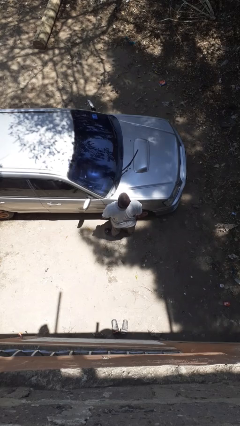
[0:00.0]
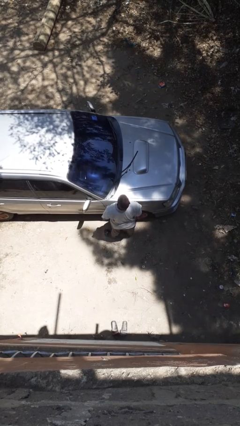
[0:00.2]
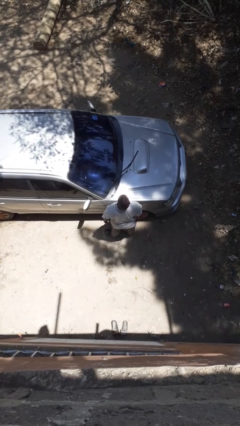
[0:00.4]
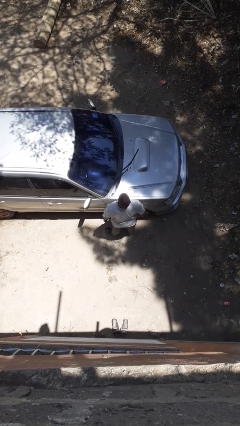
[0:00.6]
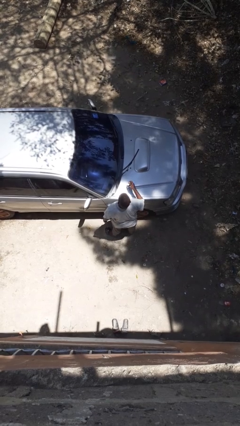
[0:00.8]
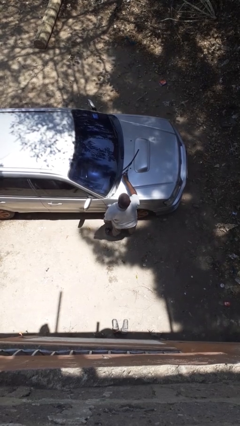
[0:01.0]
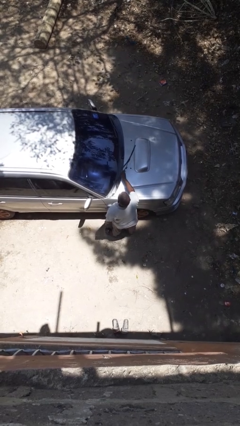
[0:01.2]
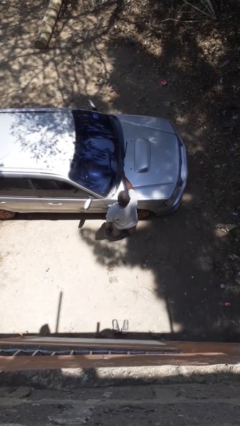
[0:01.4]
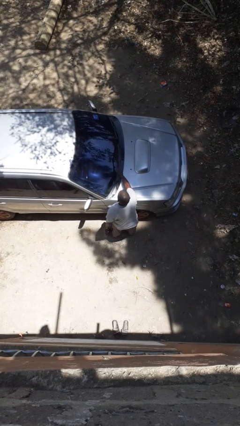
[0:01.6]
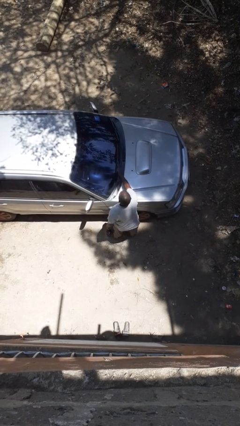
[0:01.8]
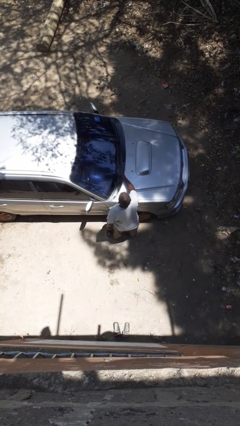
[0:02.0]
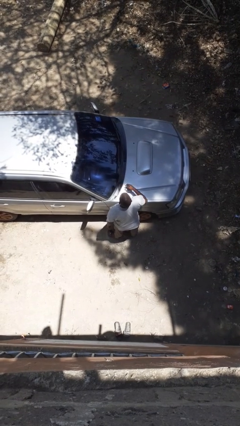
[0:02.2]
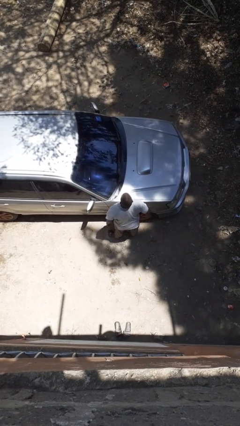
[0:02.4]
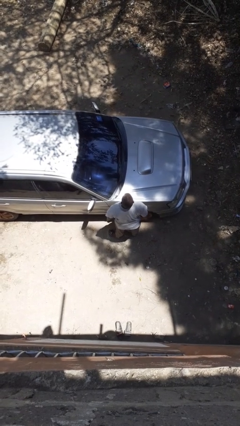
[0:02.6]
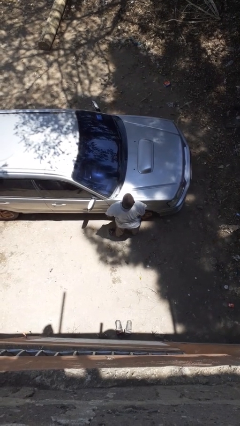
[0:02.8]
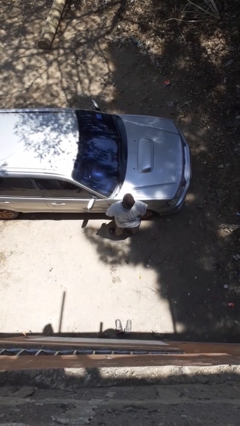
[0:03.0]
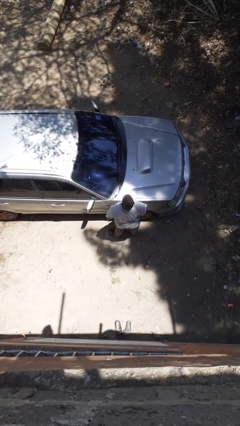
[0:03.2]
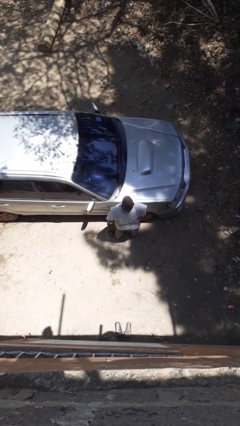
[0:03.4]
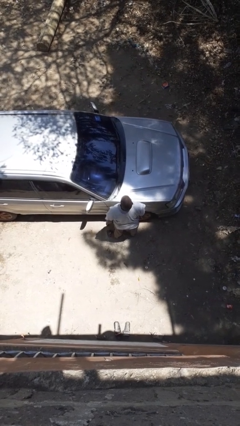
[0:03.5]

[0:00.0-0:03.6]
person flips down car wipers

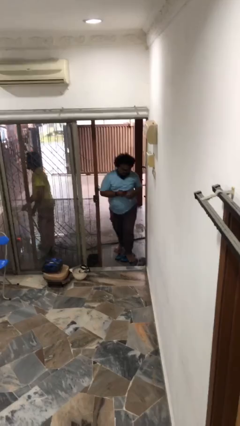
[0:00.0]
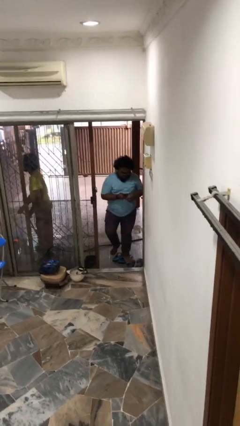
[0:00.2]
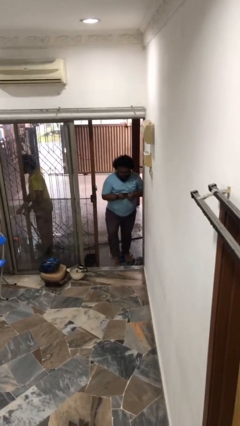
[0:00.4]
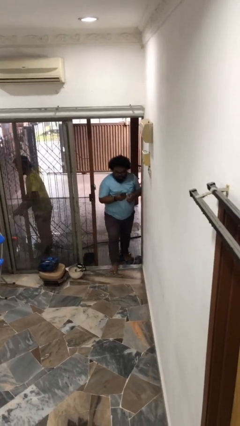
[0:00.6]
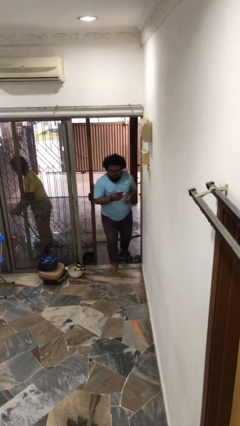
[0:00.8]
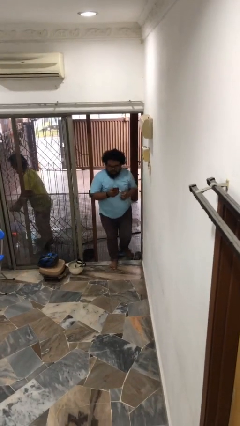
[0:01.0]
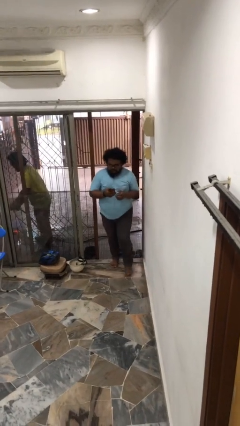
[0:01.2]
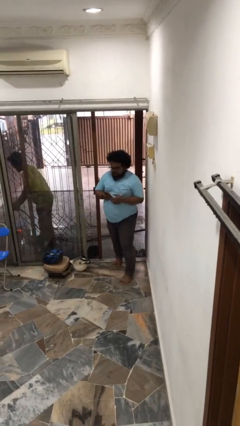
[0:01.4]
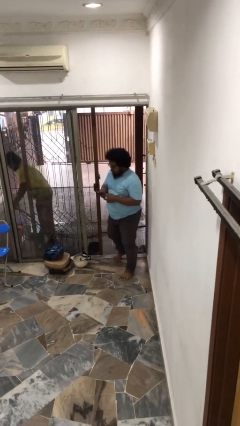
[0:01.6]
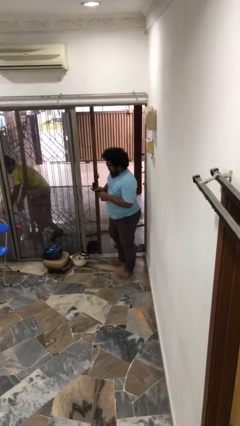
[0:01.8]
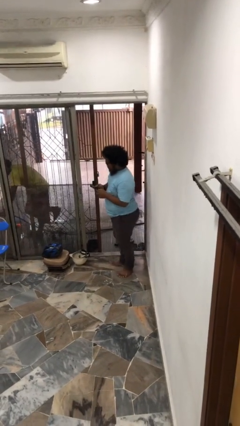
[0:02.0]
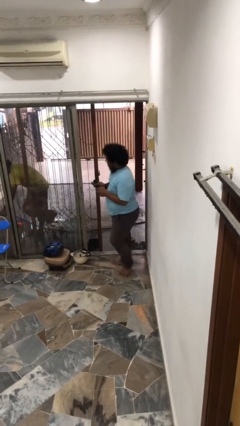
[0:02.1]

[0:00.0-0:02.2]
person enters scene through structure

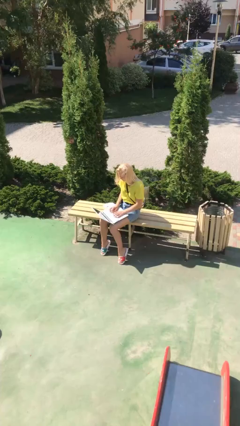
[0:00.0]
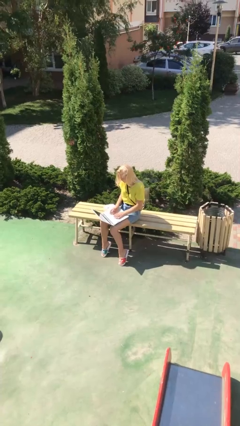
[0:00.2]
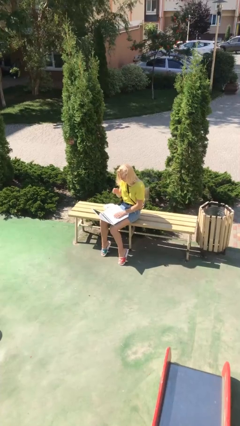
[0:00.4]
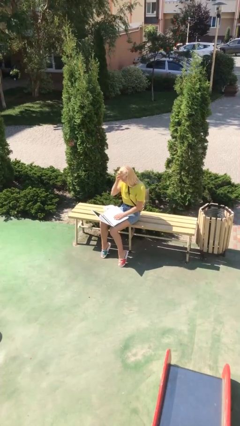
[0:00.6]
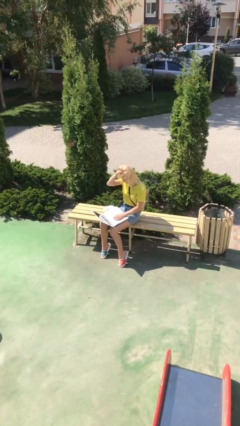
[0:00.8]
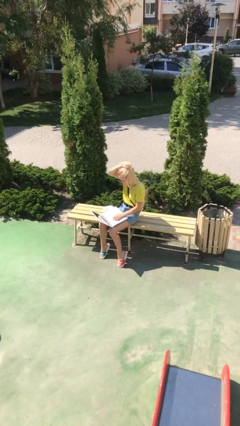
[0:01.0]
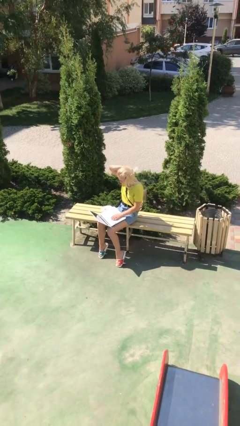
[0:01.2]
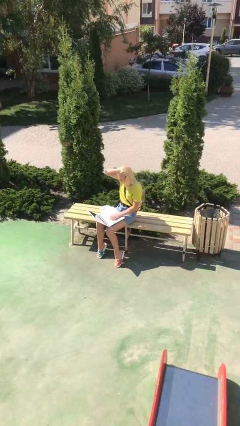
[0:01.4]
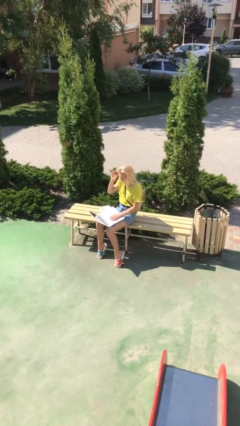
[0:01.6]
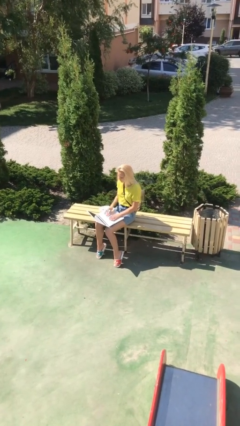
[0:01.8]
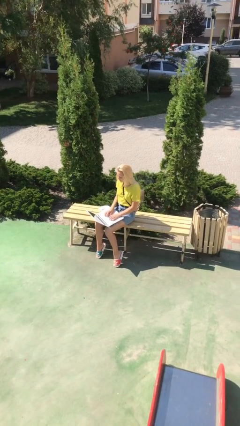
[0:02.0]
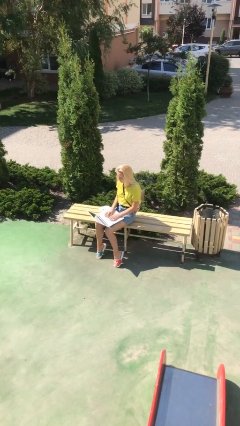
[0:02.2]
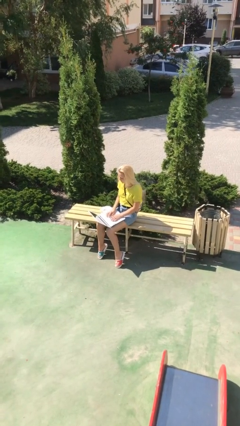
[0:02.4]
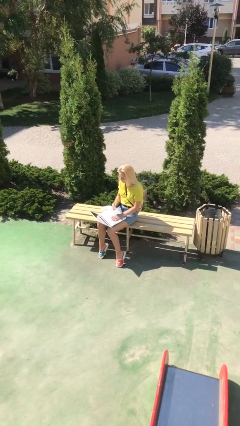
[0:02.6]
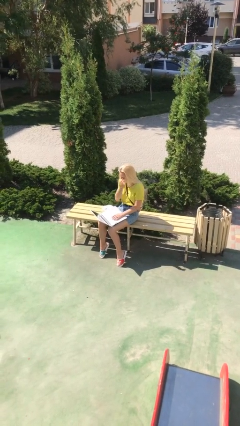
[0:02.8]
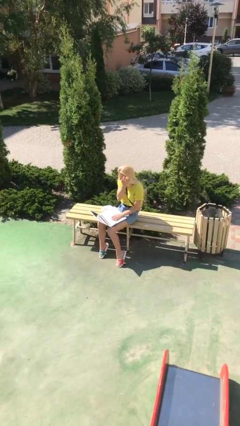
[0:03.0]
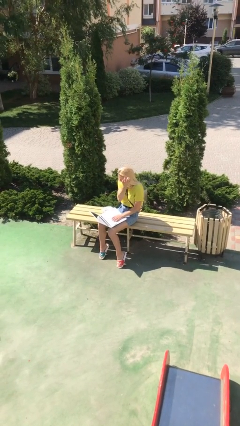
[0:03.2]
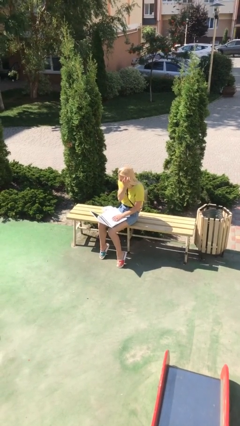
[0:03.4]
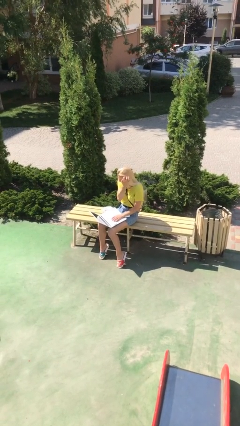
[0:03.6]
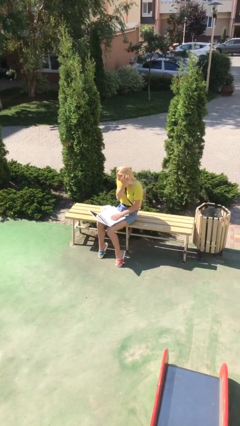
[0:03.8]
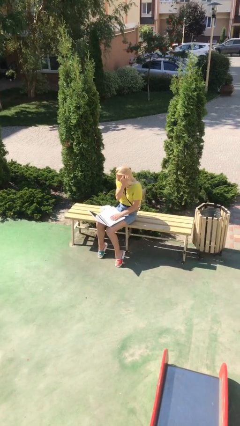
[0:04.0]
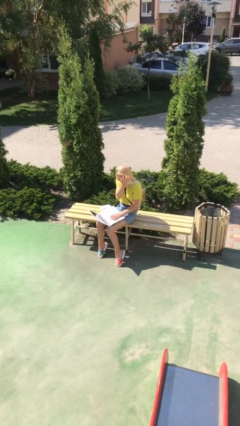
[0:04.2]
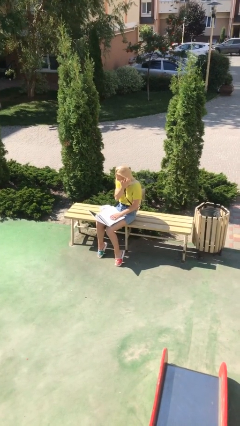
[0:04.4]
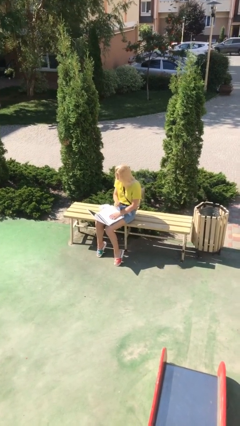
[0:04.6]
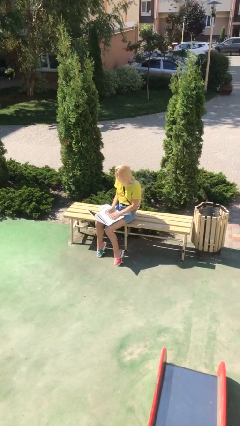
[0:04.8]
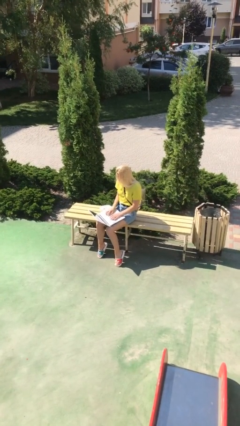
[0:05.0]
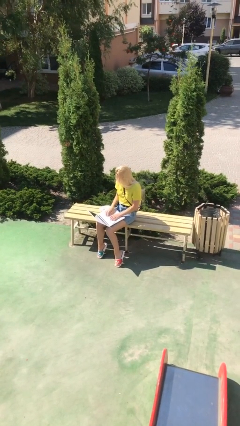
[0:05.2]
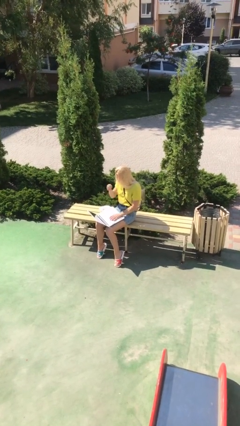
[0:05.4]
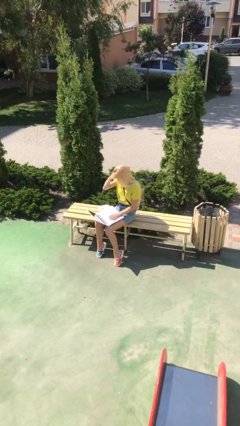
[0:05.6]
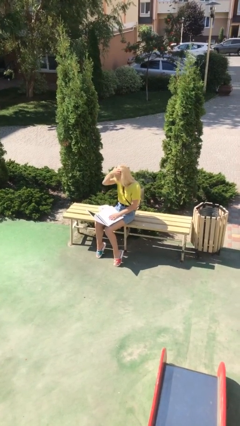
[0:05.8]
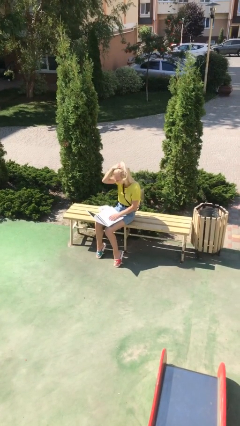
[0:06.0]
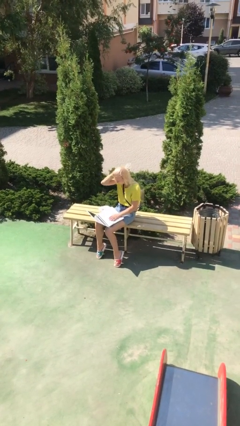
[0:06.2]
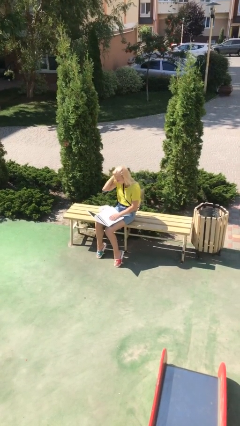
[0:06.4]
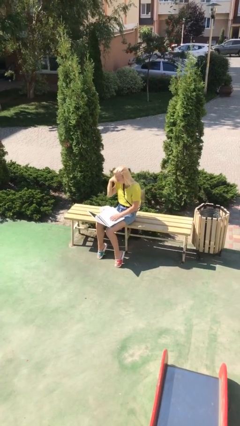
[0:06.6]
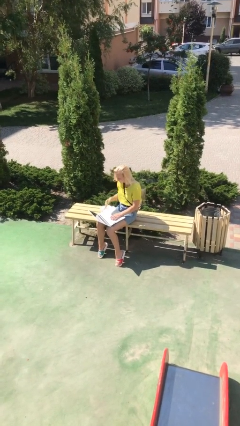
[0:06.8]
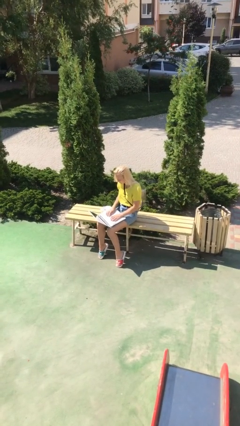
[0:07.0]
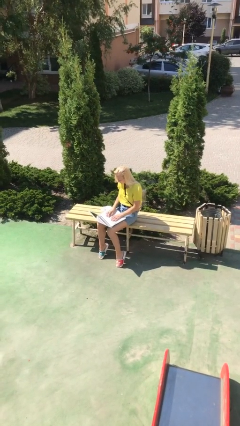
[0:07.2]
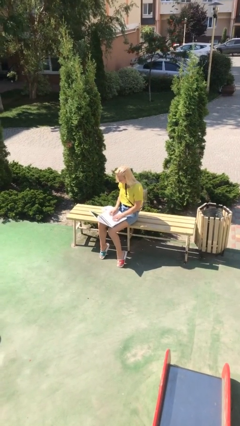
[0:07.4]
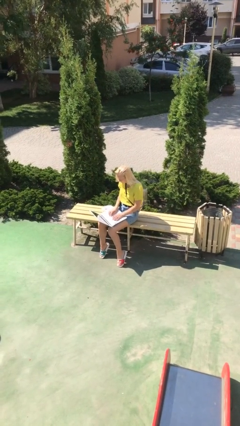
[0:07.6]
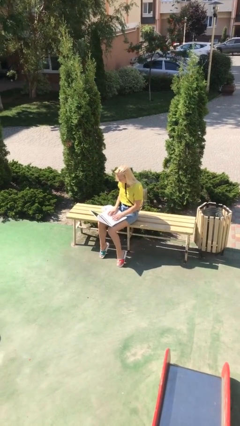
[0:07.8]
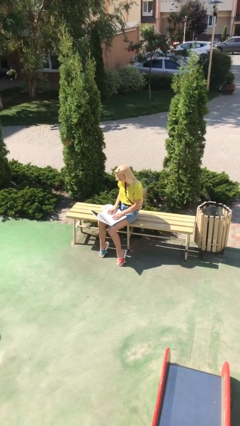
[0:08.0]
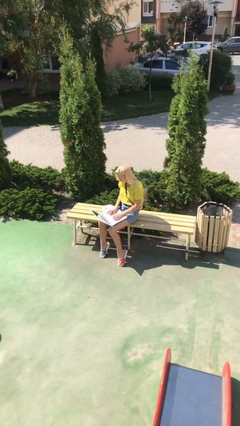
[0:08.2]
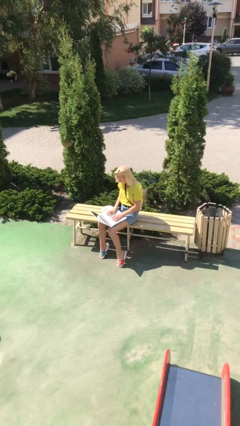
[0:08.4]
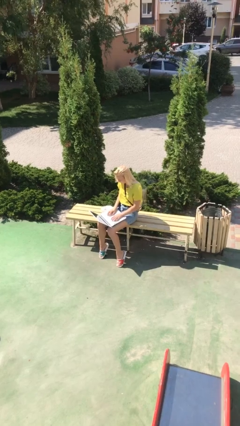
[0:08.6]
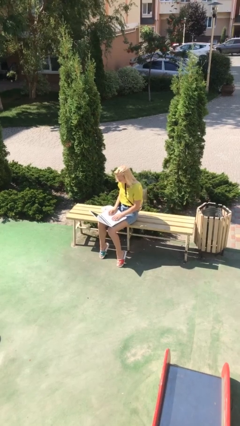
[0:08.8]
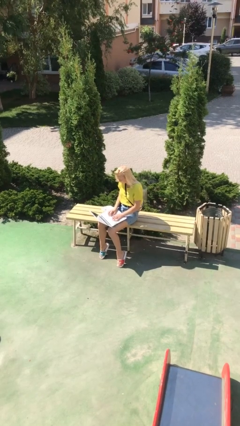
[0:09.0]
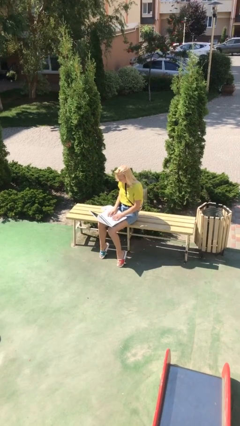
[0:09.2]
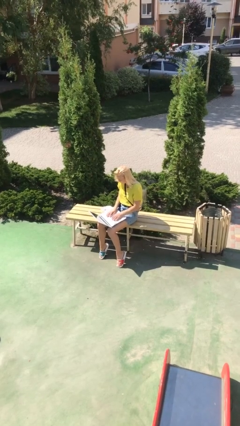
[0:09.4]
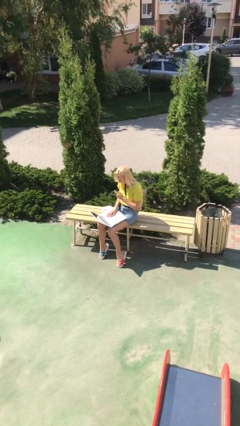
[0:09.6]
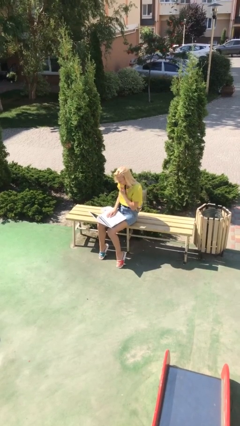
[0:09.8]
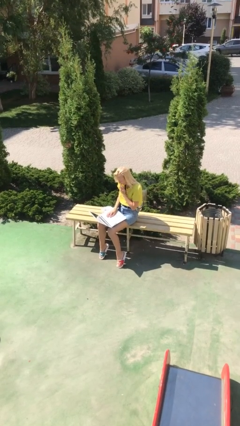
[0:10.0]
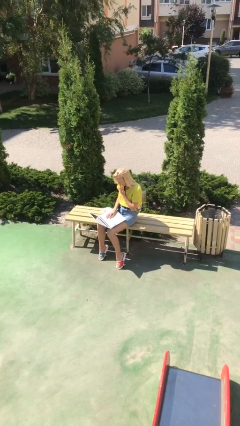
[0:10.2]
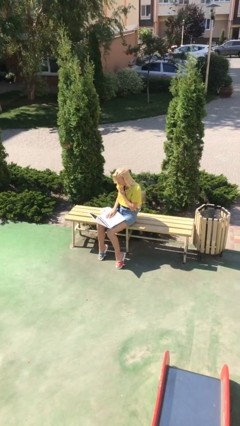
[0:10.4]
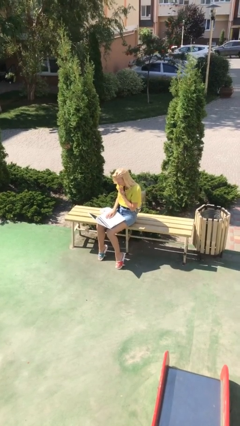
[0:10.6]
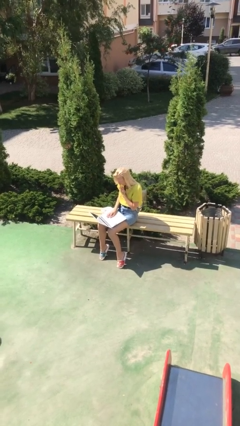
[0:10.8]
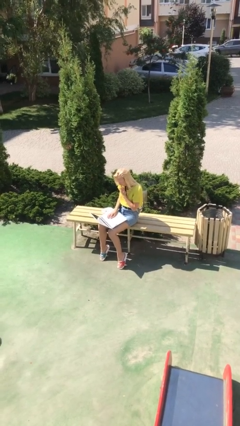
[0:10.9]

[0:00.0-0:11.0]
person interacts with laptop

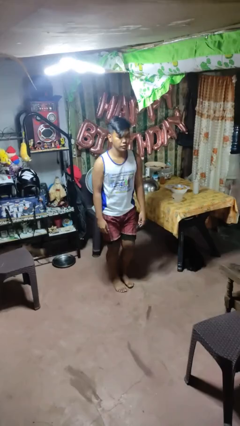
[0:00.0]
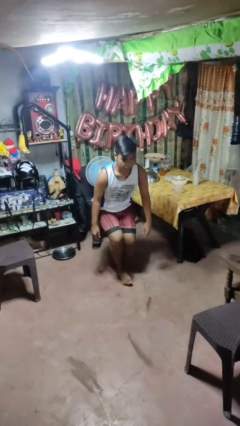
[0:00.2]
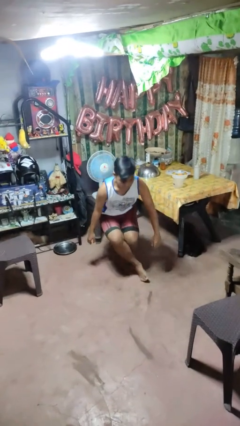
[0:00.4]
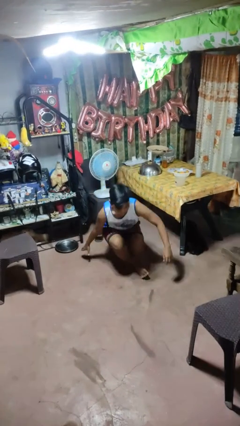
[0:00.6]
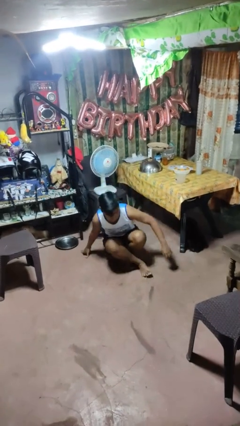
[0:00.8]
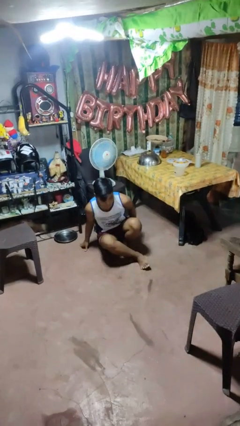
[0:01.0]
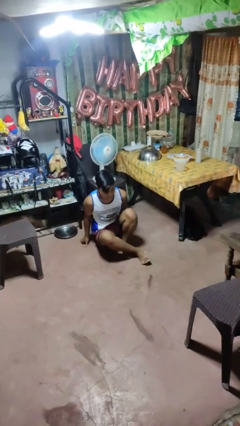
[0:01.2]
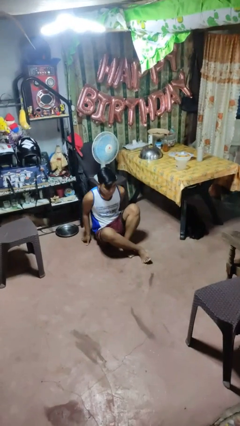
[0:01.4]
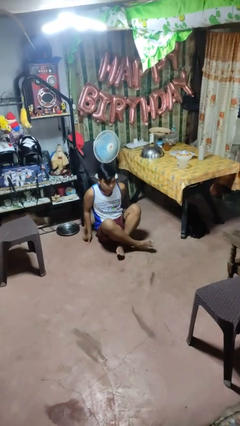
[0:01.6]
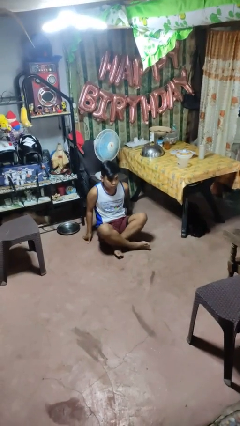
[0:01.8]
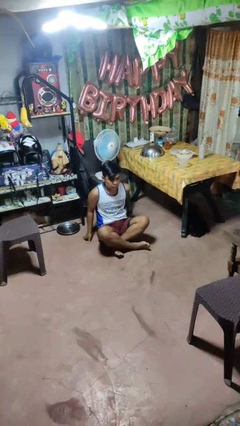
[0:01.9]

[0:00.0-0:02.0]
person sits crisscross
